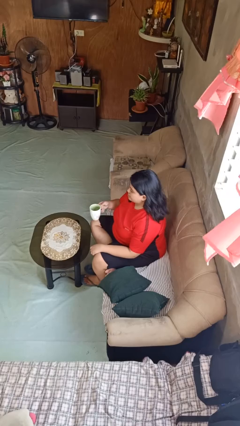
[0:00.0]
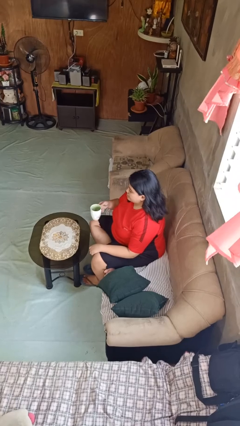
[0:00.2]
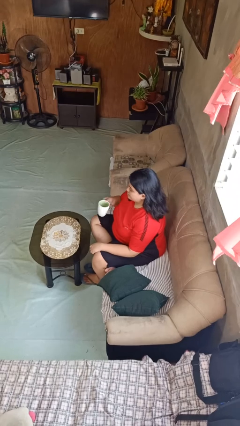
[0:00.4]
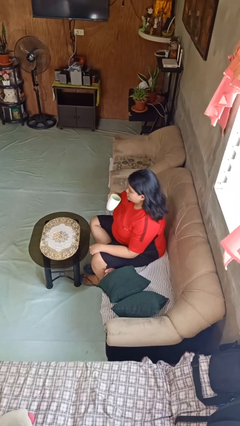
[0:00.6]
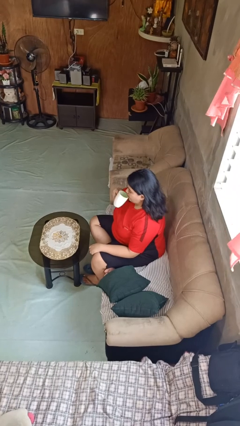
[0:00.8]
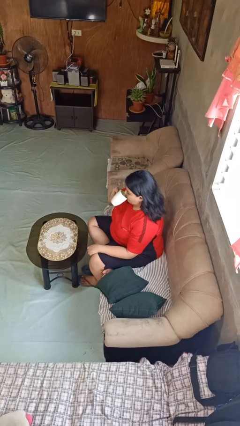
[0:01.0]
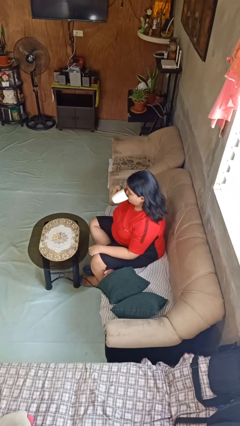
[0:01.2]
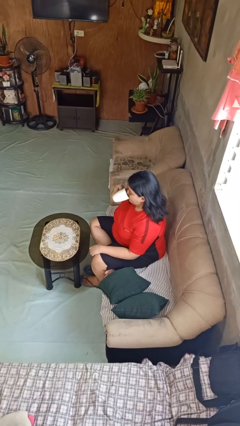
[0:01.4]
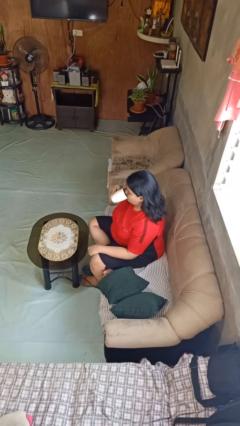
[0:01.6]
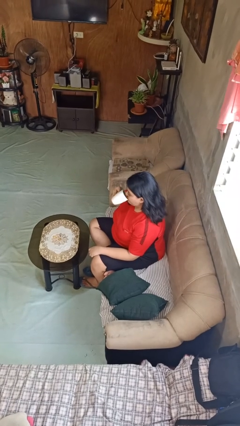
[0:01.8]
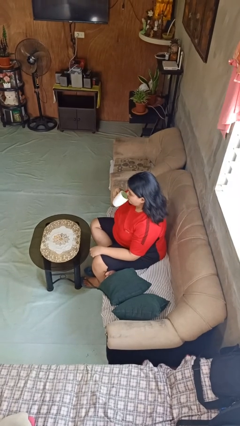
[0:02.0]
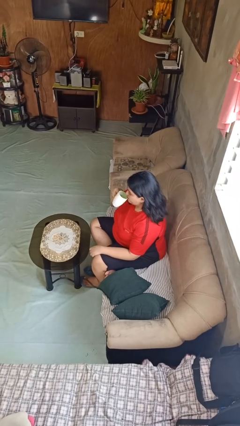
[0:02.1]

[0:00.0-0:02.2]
person drinks from mug

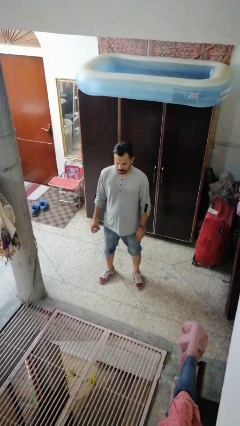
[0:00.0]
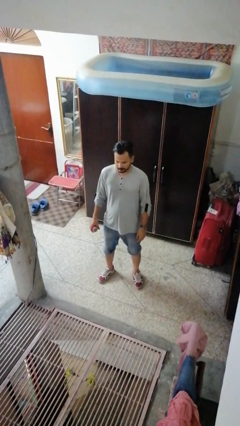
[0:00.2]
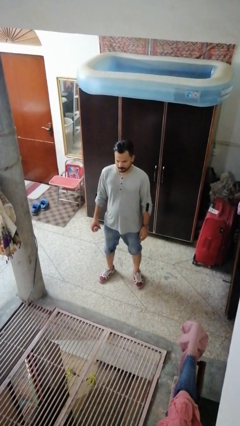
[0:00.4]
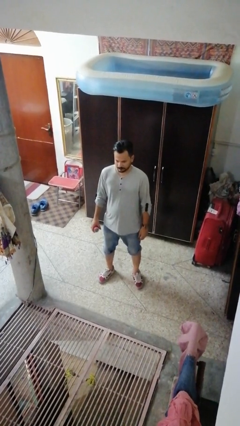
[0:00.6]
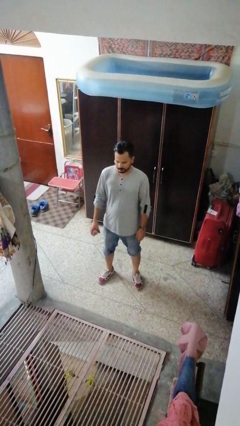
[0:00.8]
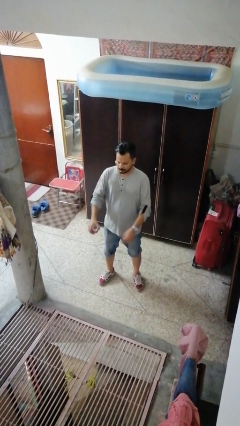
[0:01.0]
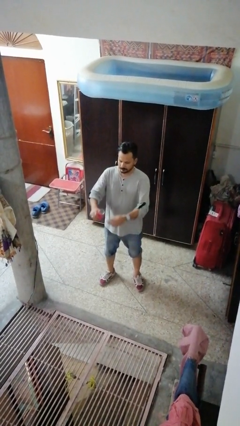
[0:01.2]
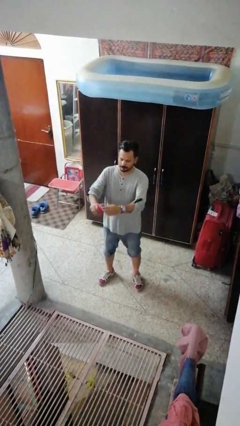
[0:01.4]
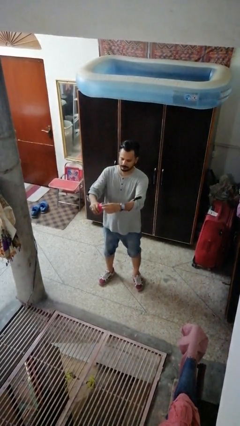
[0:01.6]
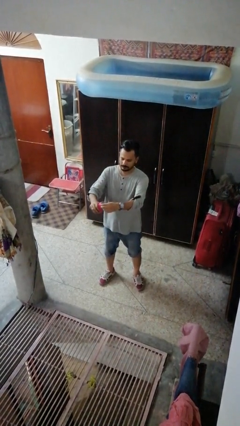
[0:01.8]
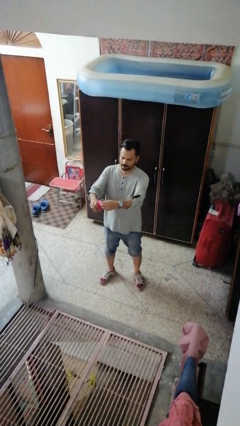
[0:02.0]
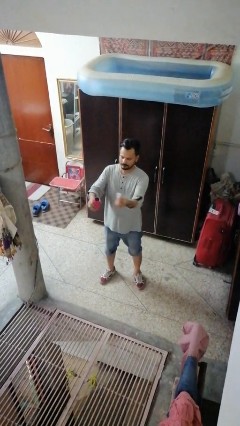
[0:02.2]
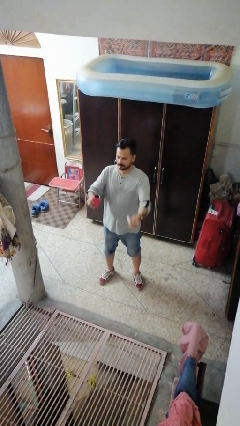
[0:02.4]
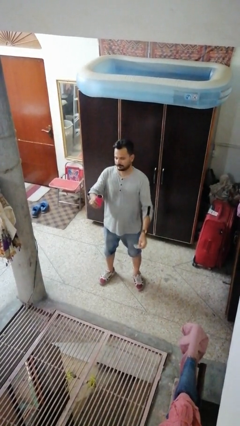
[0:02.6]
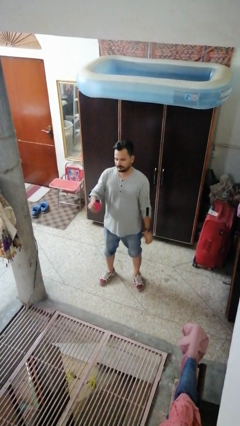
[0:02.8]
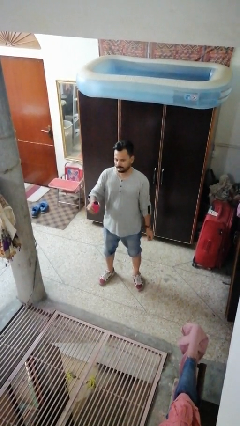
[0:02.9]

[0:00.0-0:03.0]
person opens beverage can

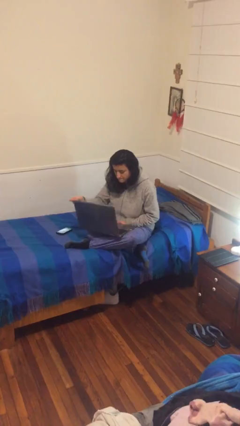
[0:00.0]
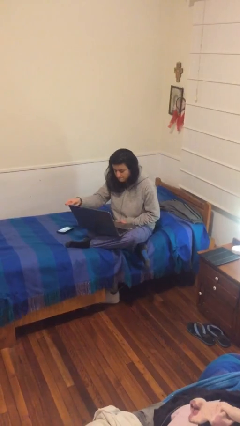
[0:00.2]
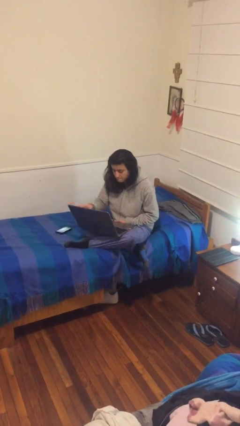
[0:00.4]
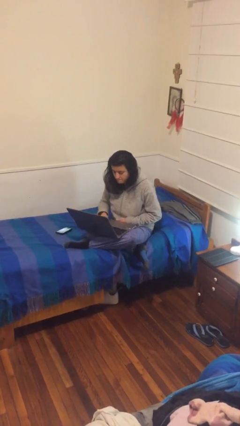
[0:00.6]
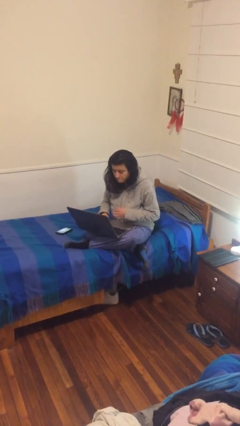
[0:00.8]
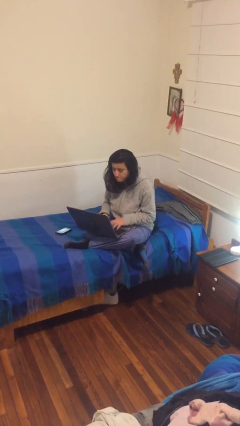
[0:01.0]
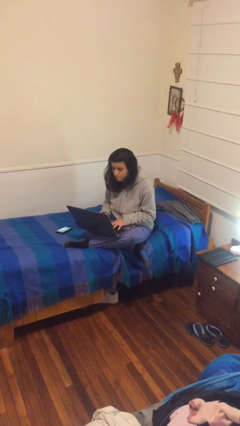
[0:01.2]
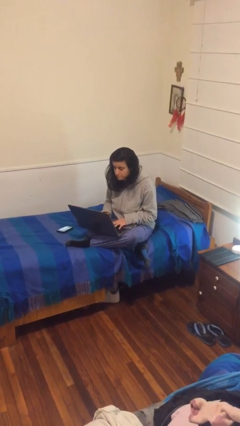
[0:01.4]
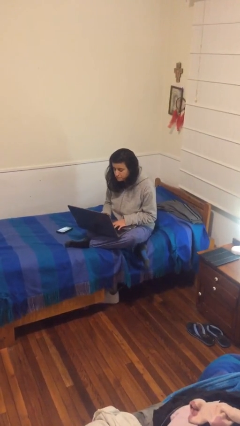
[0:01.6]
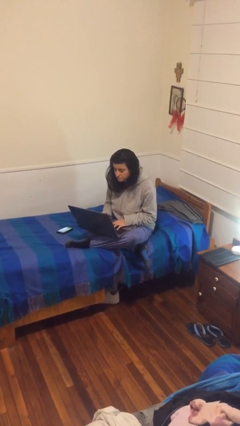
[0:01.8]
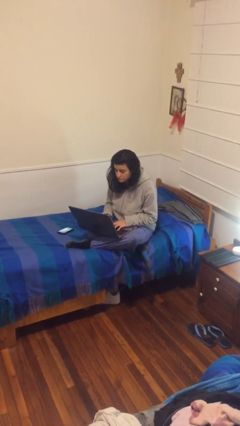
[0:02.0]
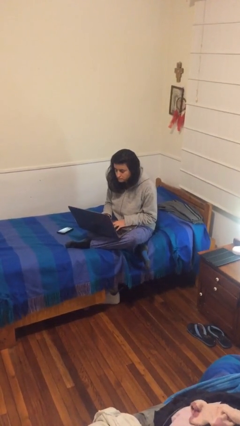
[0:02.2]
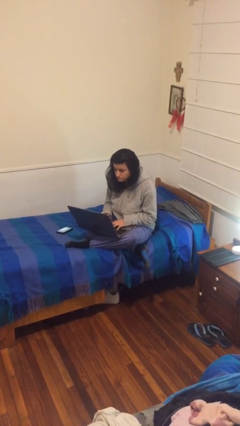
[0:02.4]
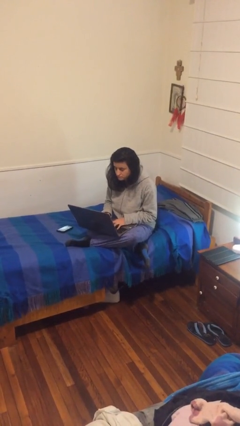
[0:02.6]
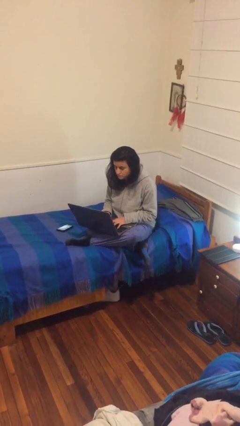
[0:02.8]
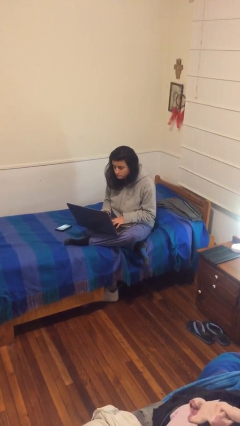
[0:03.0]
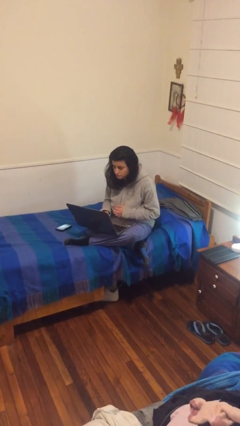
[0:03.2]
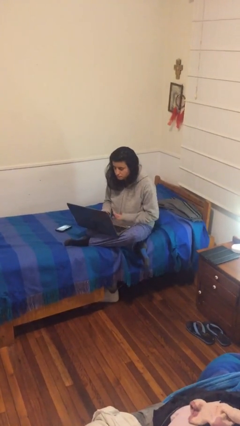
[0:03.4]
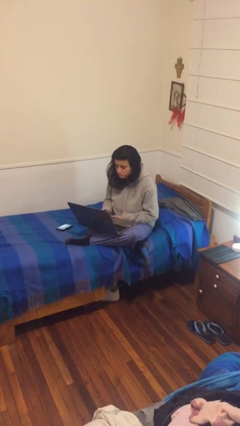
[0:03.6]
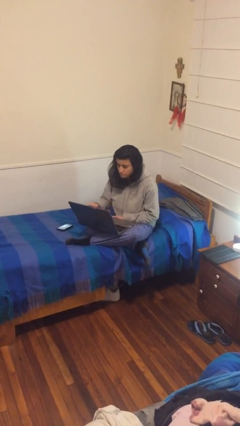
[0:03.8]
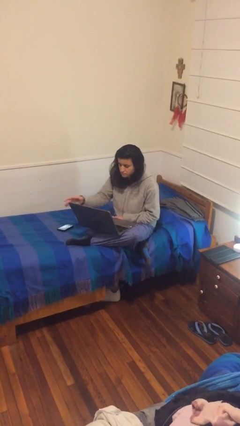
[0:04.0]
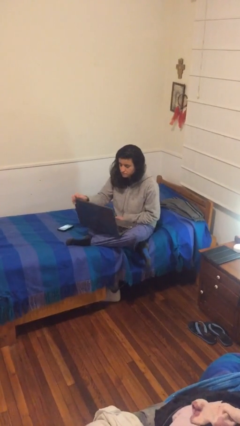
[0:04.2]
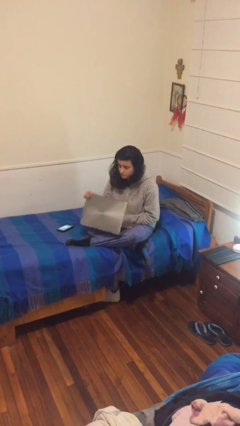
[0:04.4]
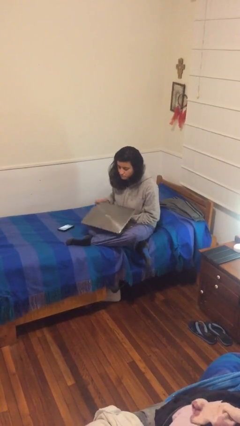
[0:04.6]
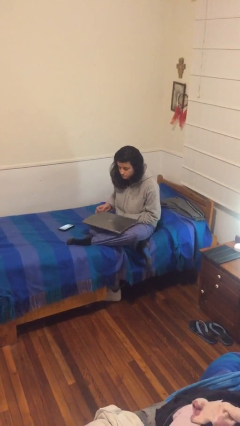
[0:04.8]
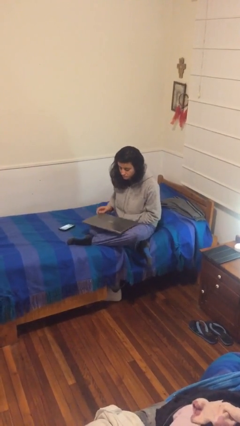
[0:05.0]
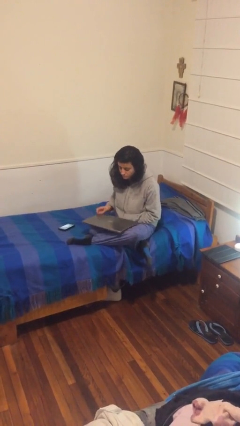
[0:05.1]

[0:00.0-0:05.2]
person interacts with laptop

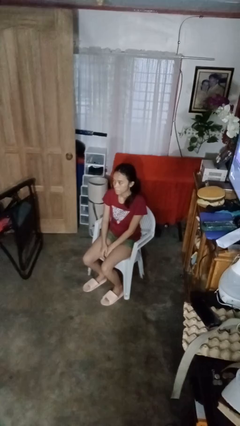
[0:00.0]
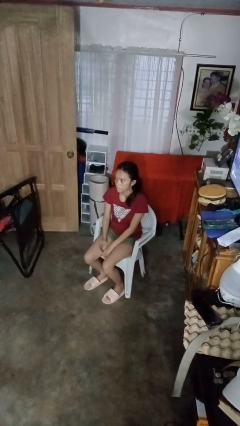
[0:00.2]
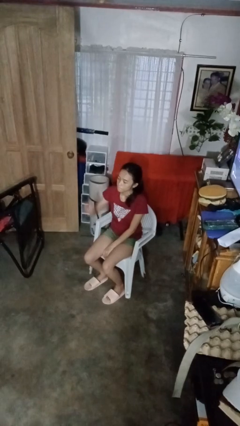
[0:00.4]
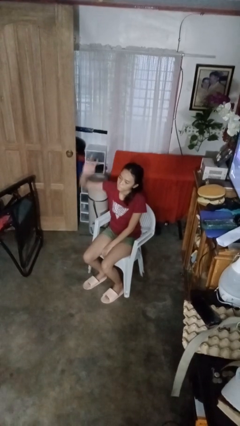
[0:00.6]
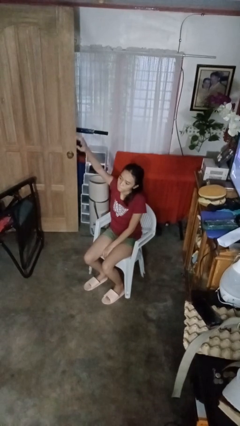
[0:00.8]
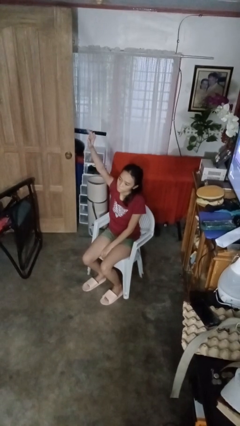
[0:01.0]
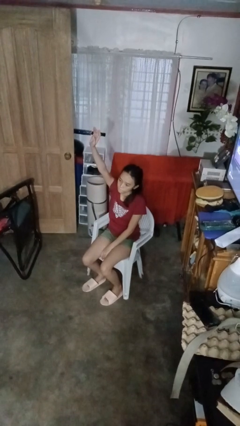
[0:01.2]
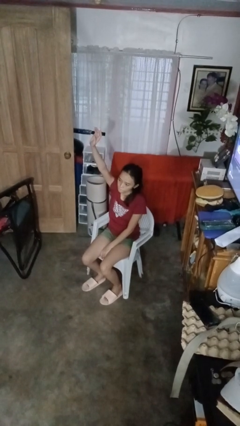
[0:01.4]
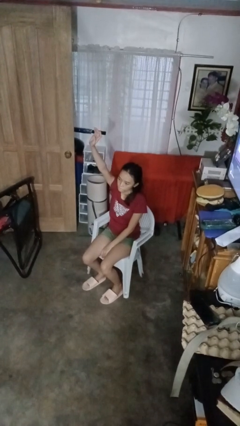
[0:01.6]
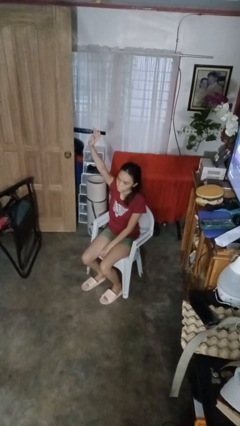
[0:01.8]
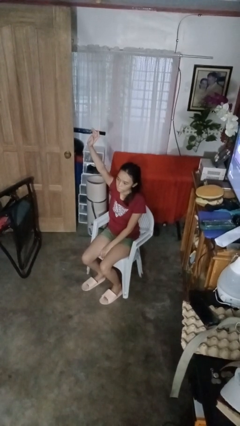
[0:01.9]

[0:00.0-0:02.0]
person gestures raise hand

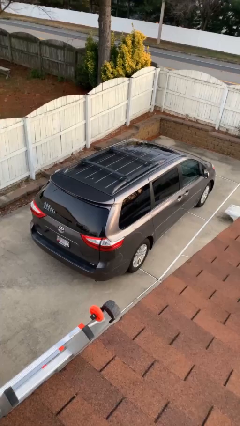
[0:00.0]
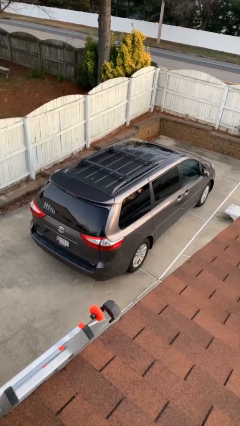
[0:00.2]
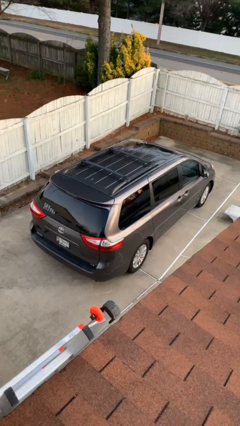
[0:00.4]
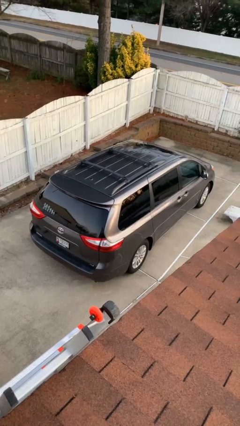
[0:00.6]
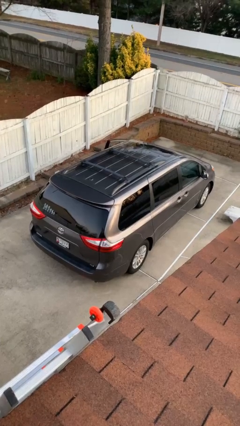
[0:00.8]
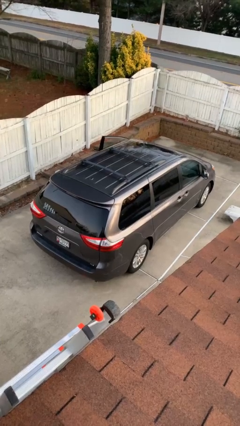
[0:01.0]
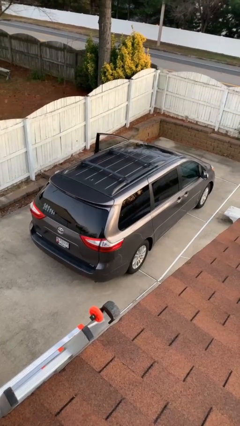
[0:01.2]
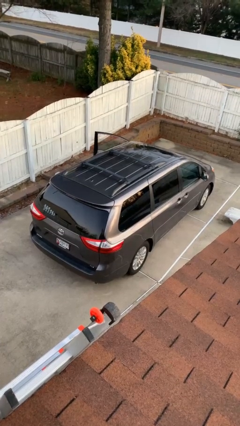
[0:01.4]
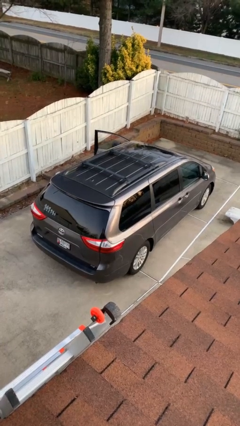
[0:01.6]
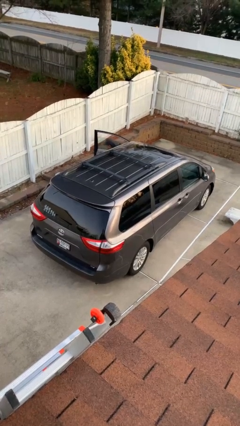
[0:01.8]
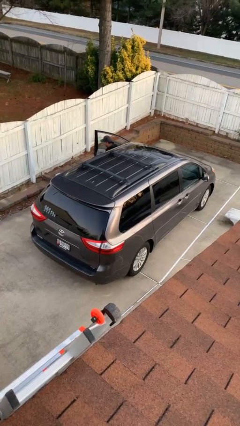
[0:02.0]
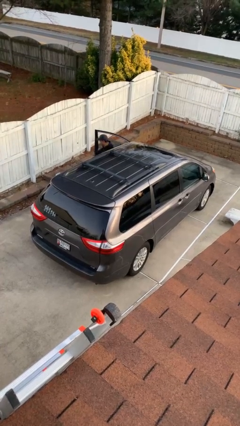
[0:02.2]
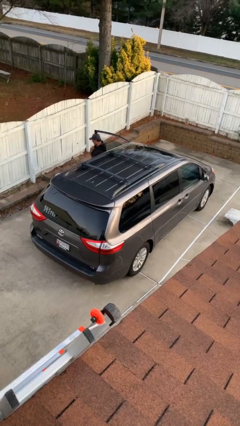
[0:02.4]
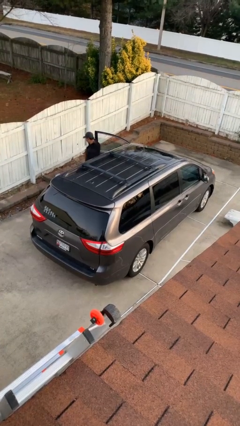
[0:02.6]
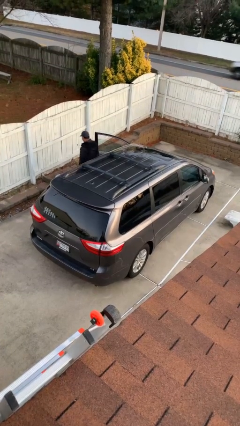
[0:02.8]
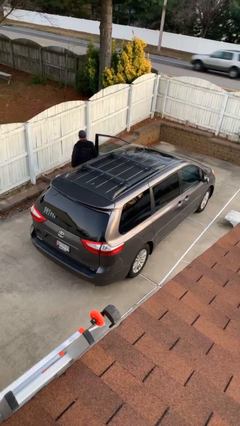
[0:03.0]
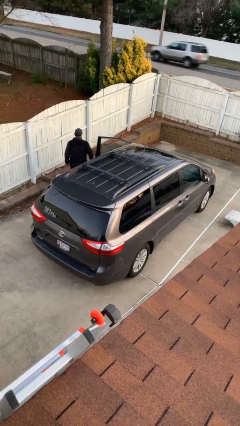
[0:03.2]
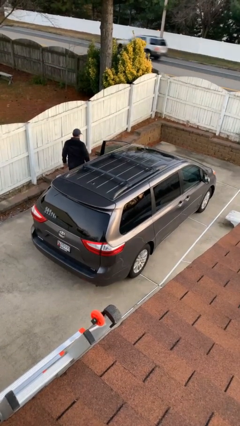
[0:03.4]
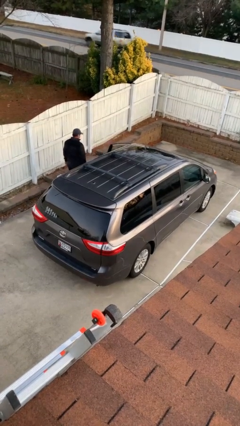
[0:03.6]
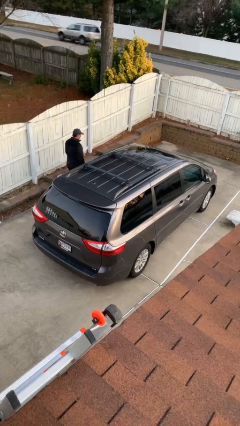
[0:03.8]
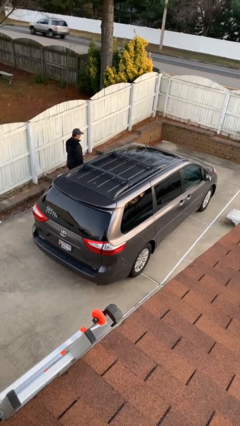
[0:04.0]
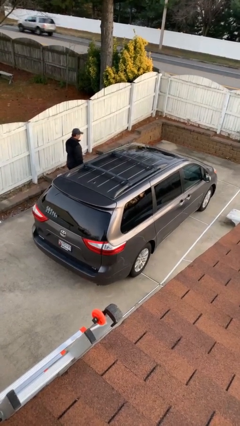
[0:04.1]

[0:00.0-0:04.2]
car drops off person

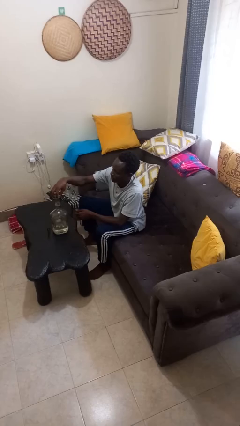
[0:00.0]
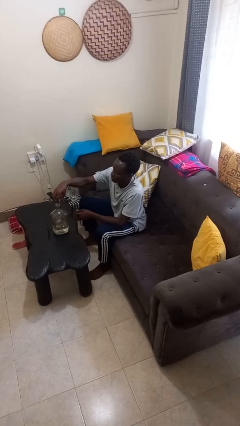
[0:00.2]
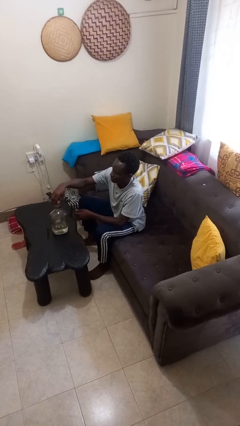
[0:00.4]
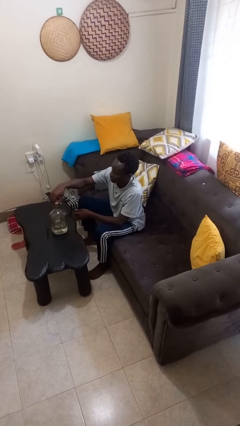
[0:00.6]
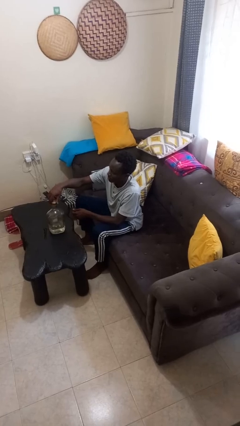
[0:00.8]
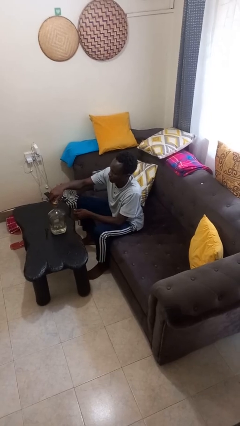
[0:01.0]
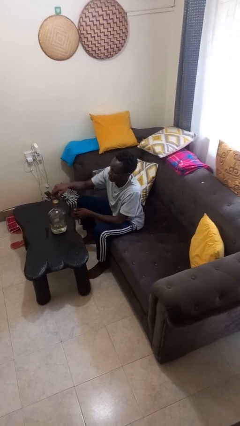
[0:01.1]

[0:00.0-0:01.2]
person screws lid to bottle
